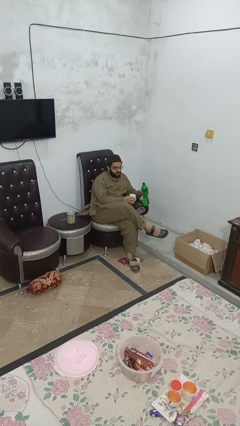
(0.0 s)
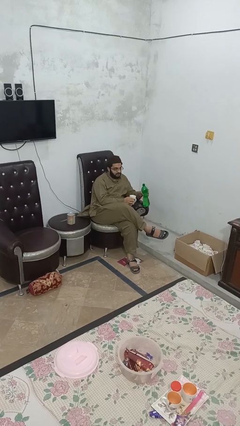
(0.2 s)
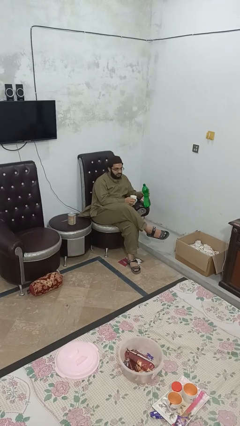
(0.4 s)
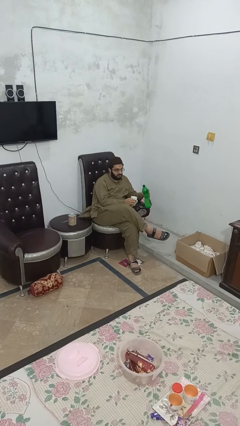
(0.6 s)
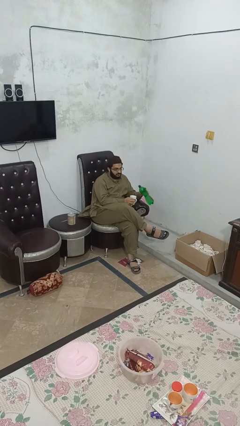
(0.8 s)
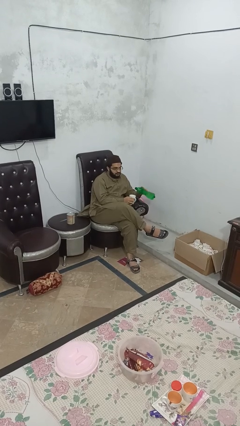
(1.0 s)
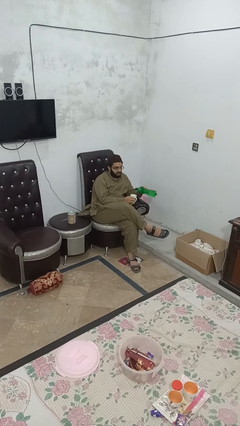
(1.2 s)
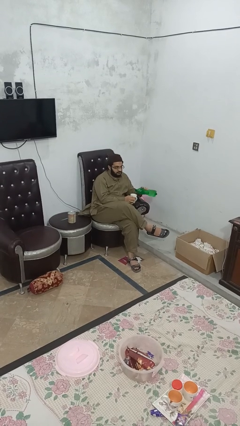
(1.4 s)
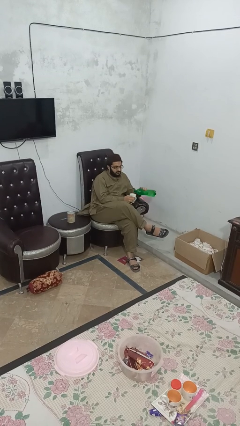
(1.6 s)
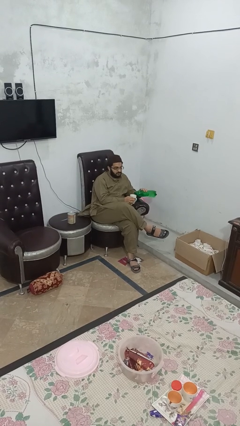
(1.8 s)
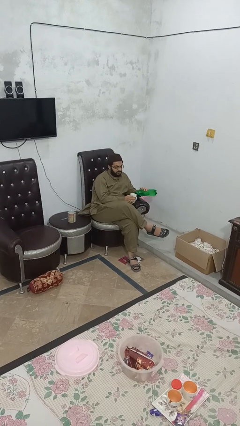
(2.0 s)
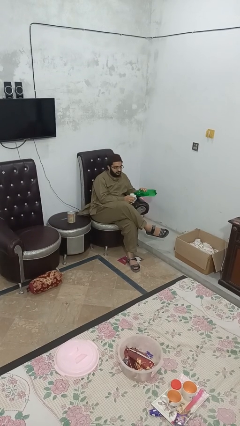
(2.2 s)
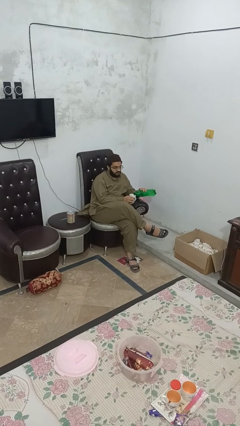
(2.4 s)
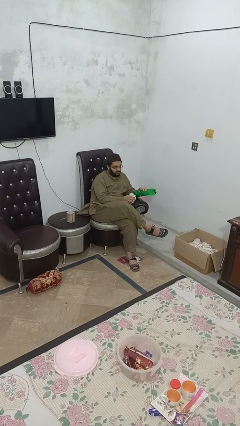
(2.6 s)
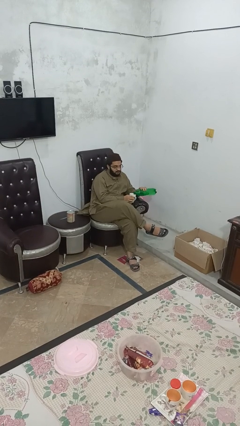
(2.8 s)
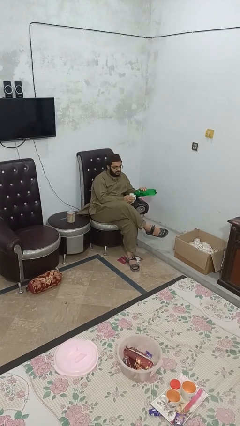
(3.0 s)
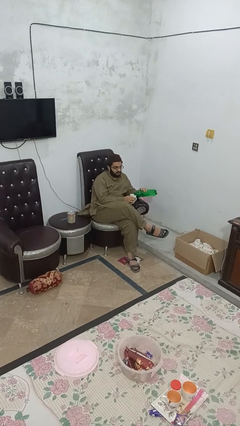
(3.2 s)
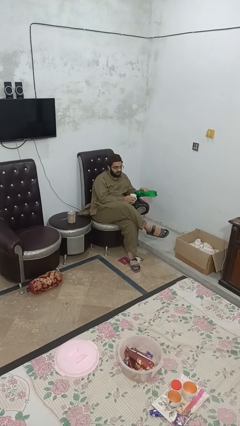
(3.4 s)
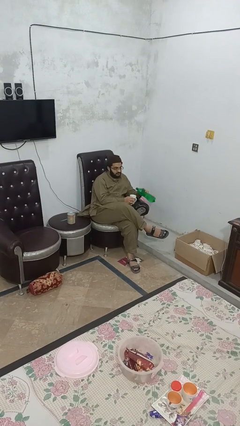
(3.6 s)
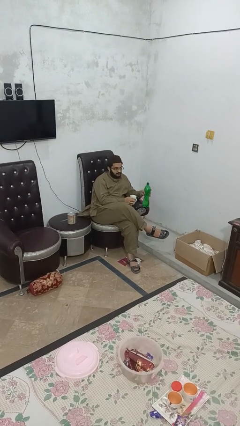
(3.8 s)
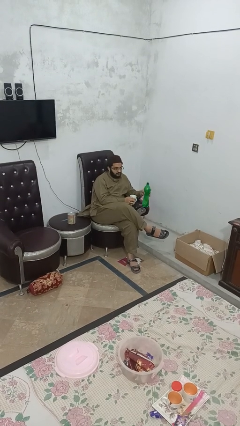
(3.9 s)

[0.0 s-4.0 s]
person pours liquid into cup

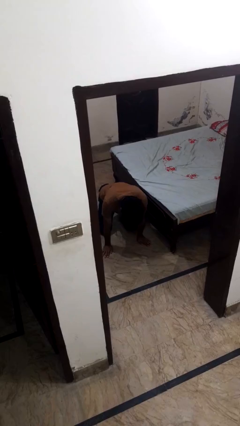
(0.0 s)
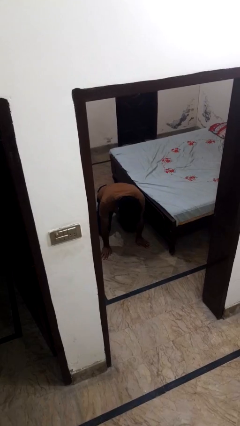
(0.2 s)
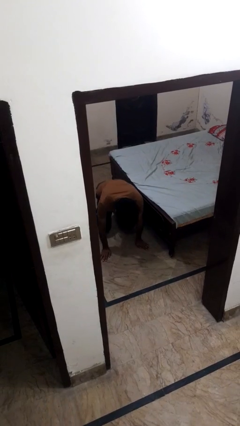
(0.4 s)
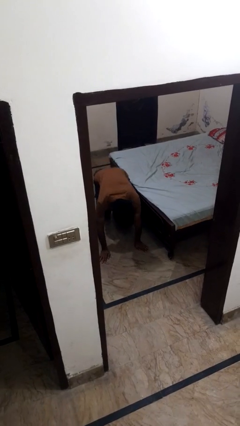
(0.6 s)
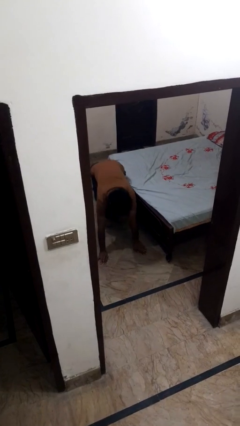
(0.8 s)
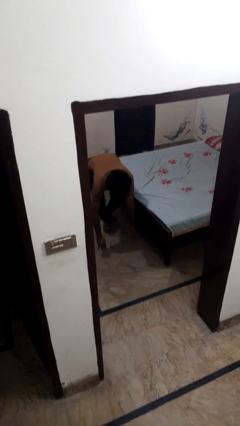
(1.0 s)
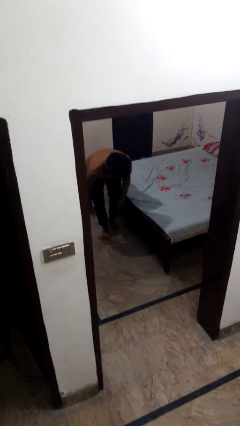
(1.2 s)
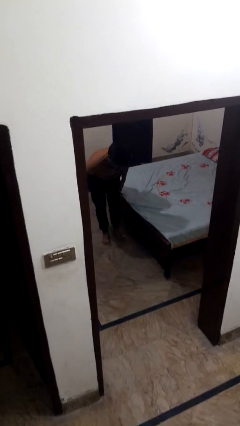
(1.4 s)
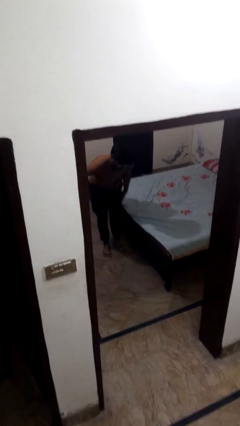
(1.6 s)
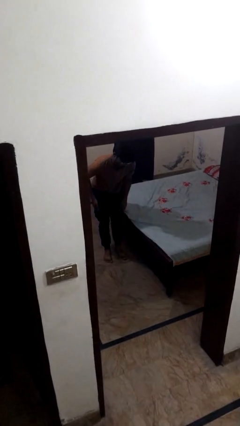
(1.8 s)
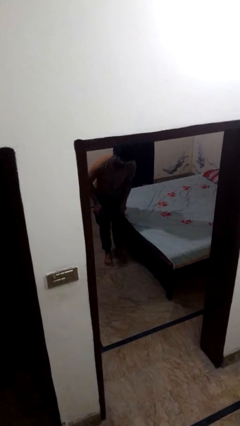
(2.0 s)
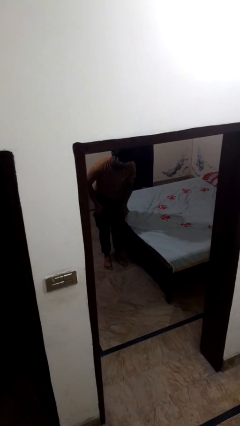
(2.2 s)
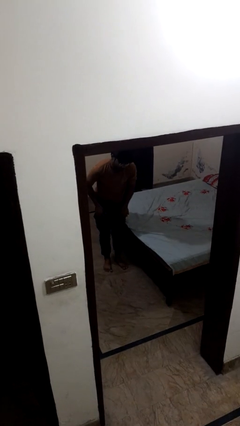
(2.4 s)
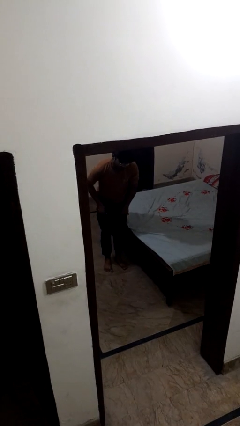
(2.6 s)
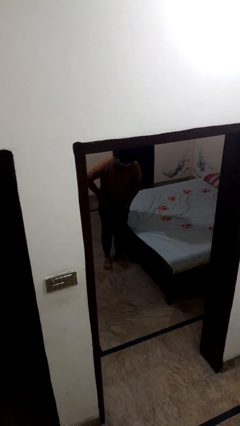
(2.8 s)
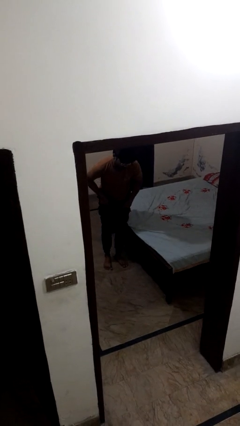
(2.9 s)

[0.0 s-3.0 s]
person stands up from floor

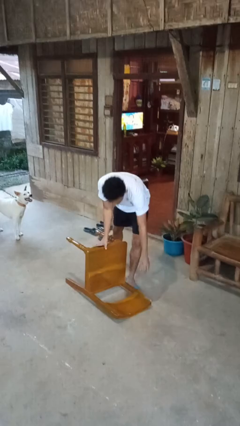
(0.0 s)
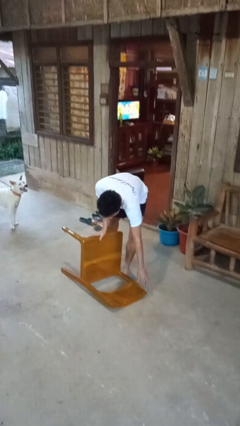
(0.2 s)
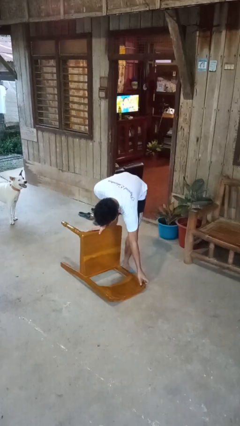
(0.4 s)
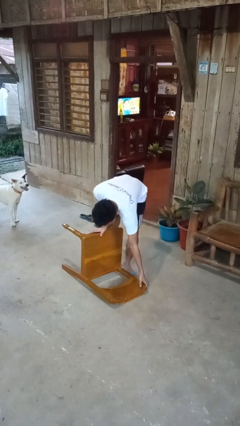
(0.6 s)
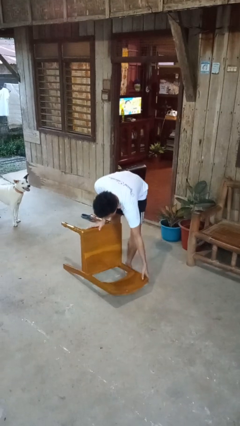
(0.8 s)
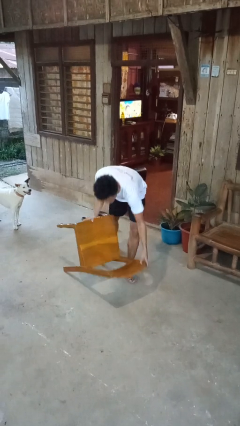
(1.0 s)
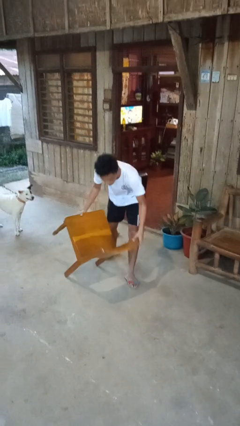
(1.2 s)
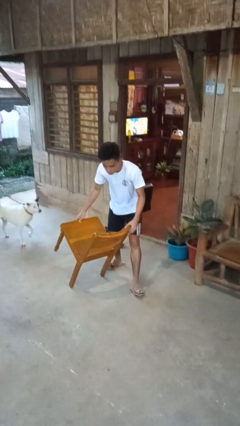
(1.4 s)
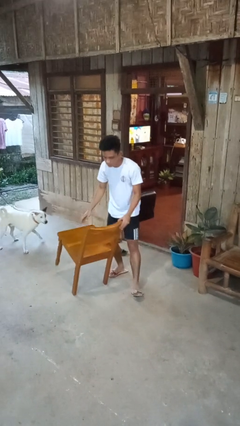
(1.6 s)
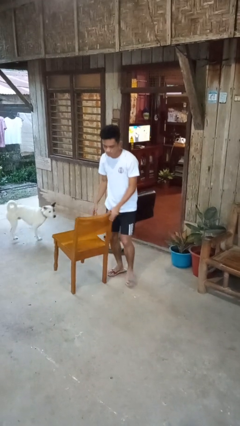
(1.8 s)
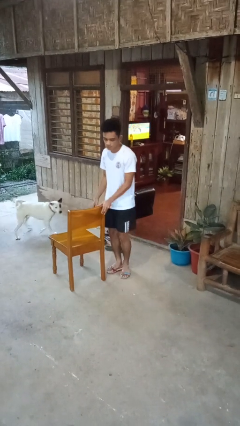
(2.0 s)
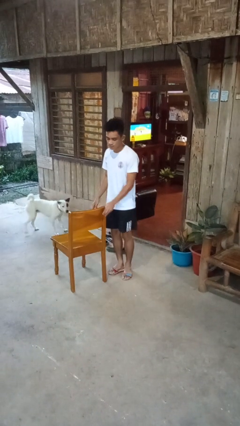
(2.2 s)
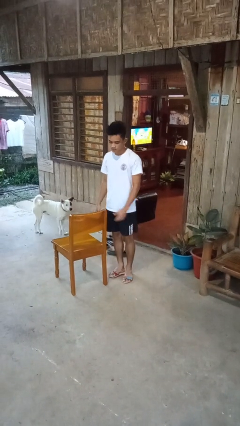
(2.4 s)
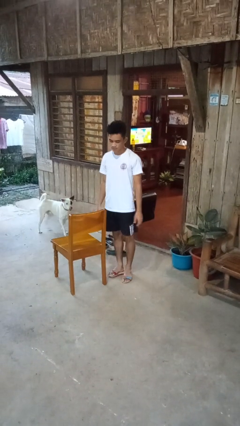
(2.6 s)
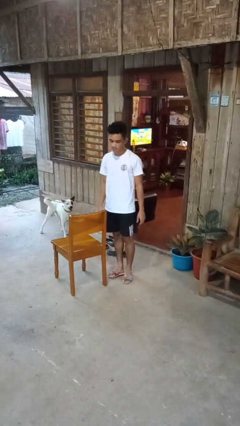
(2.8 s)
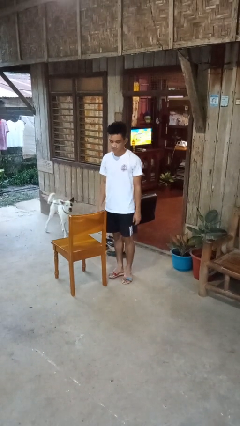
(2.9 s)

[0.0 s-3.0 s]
person sets upright furniture

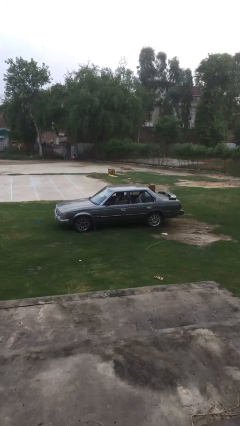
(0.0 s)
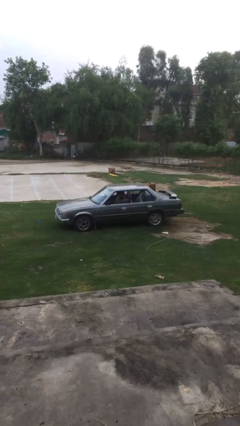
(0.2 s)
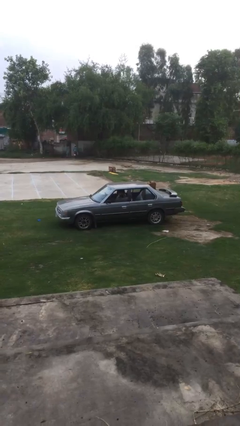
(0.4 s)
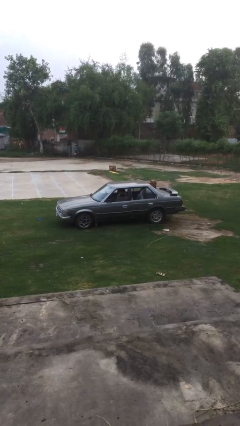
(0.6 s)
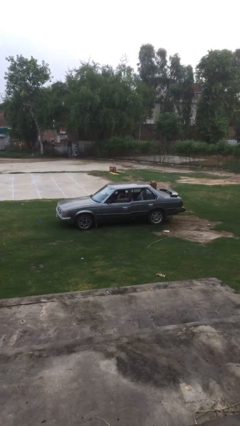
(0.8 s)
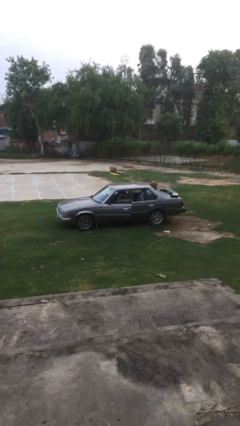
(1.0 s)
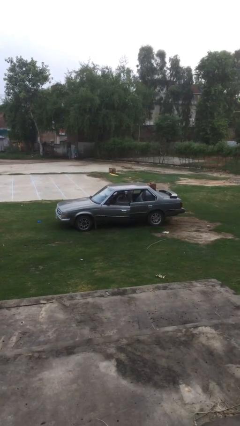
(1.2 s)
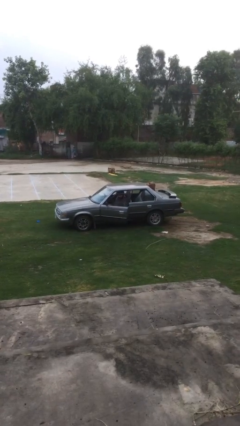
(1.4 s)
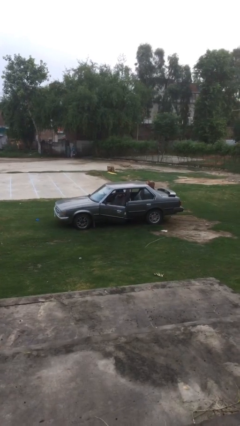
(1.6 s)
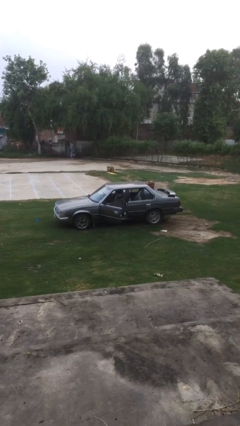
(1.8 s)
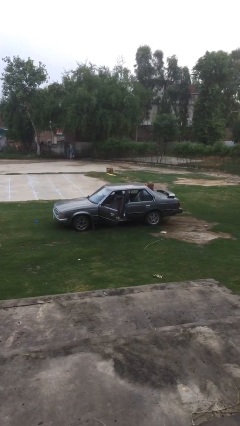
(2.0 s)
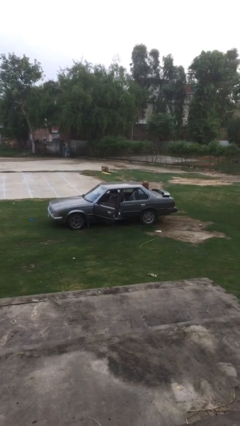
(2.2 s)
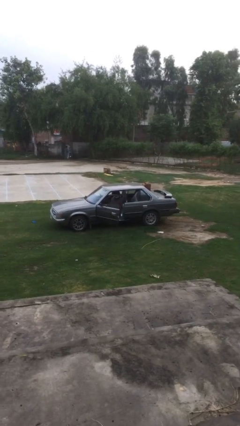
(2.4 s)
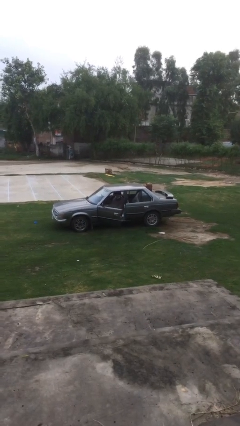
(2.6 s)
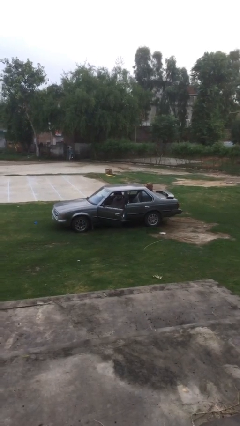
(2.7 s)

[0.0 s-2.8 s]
person opens car door

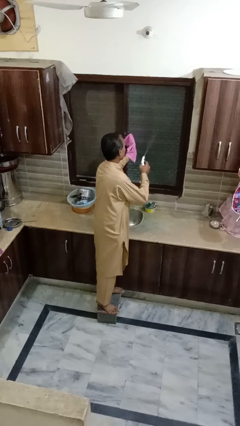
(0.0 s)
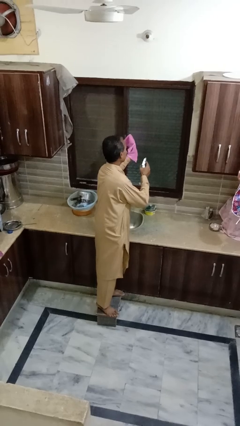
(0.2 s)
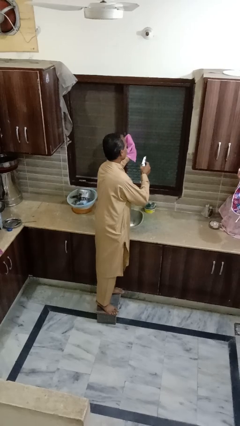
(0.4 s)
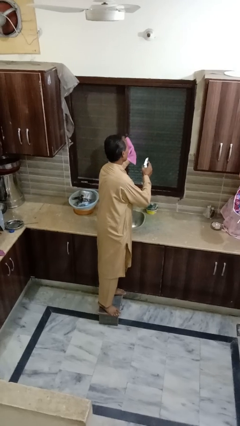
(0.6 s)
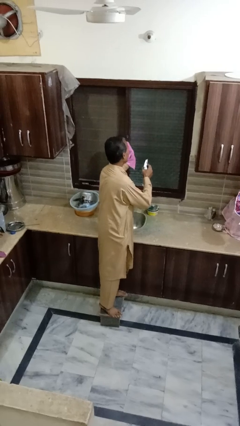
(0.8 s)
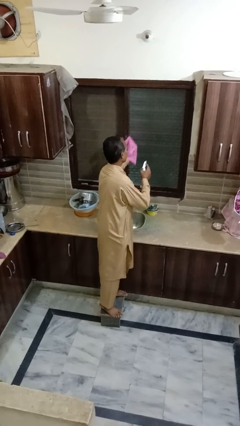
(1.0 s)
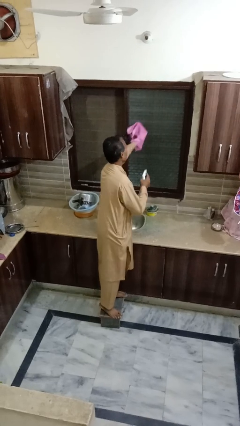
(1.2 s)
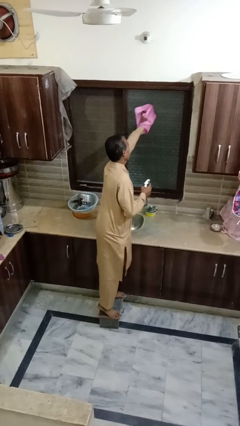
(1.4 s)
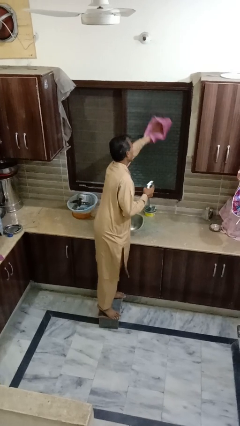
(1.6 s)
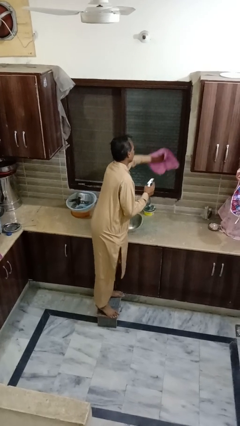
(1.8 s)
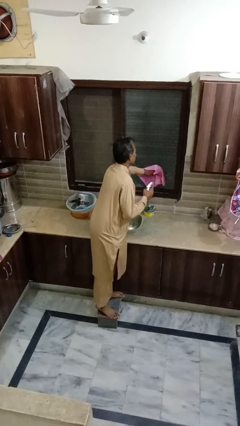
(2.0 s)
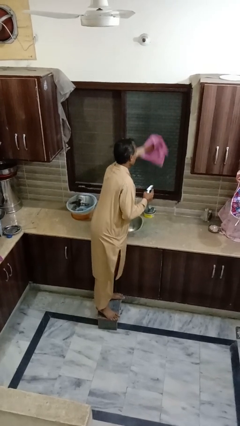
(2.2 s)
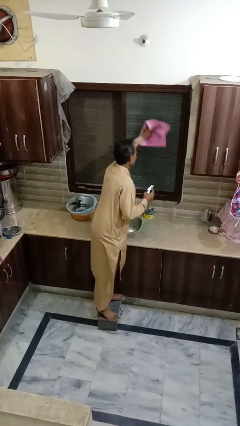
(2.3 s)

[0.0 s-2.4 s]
person washes window

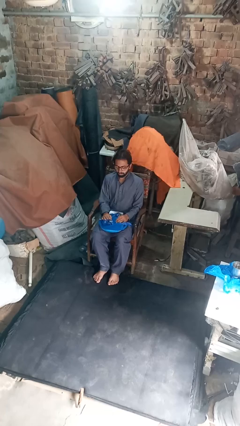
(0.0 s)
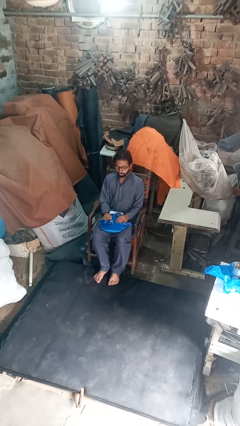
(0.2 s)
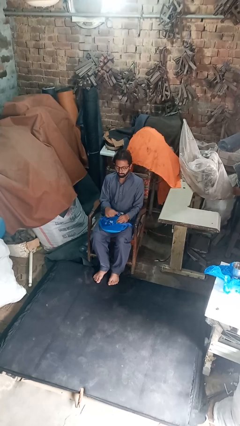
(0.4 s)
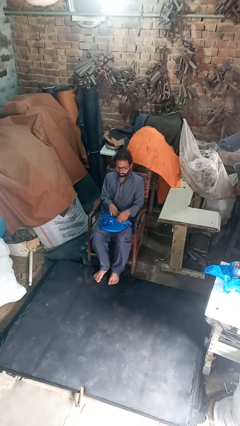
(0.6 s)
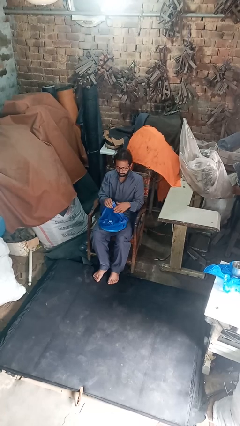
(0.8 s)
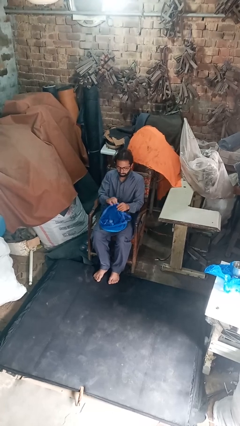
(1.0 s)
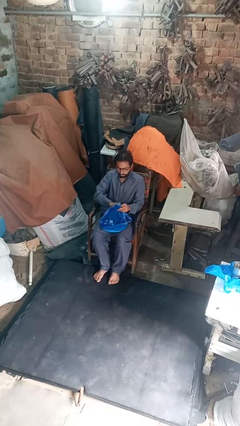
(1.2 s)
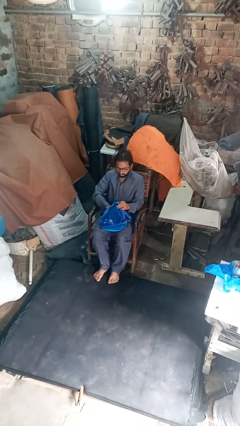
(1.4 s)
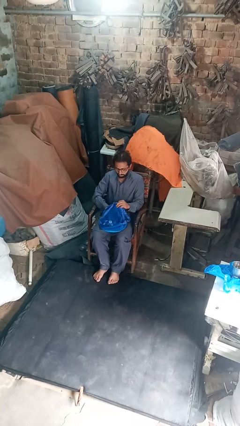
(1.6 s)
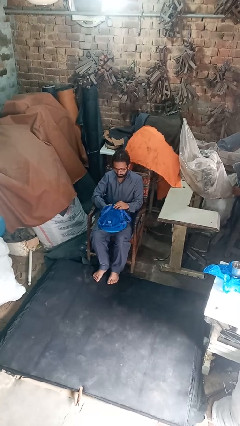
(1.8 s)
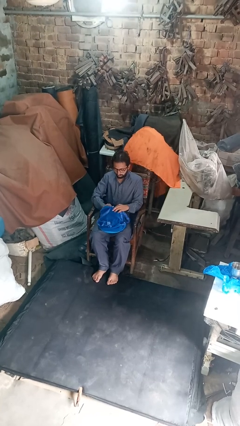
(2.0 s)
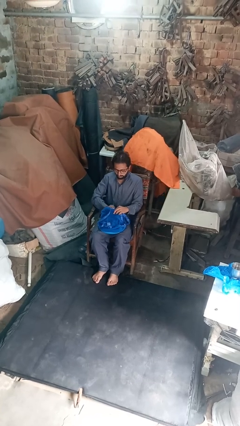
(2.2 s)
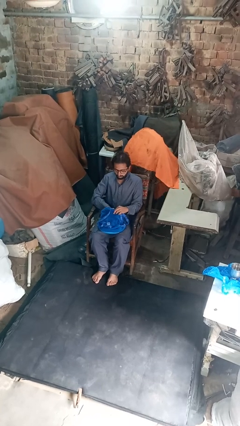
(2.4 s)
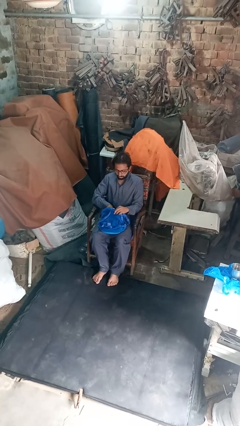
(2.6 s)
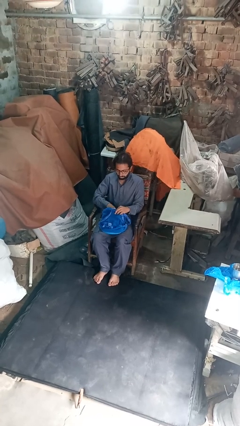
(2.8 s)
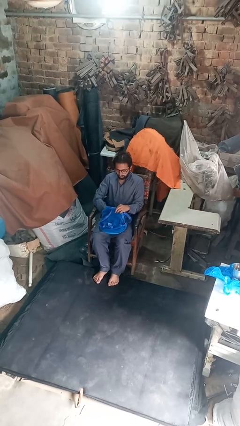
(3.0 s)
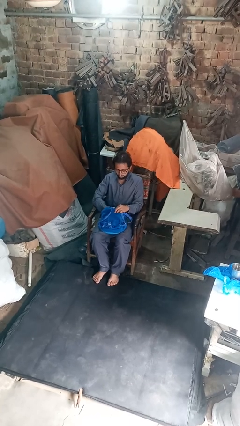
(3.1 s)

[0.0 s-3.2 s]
person searches in backpack
